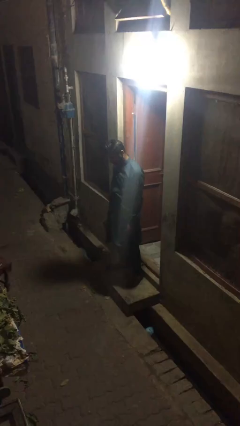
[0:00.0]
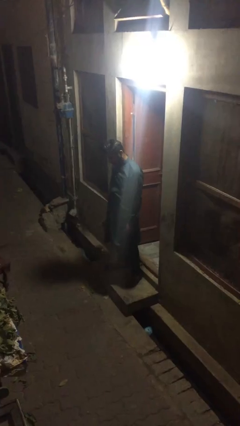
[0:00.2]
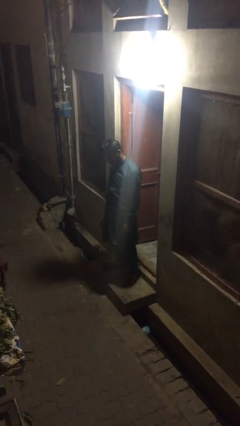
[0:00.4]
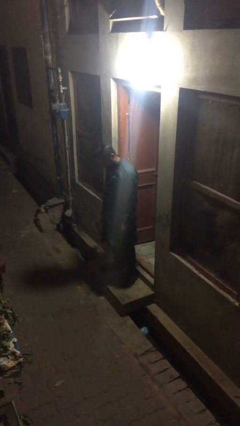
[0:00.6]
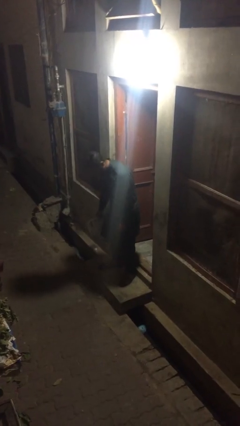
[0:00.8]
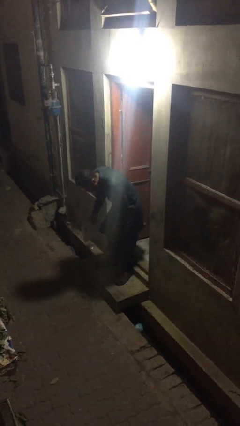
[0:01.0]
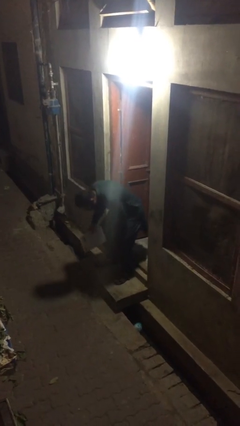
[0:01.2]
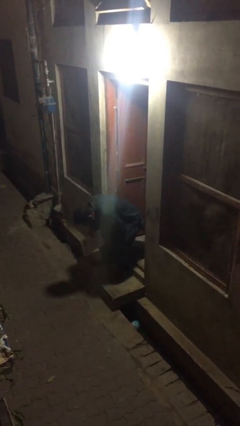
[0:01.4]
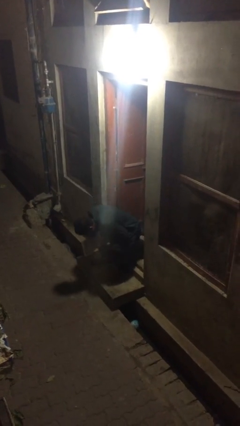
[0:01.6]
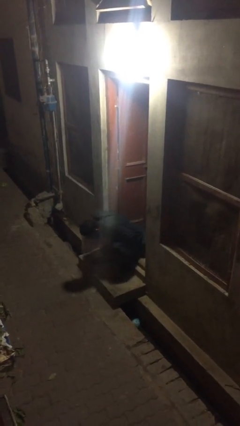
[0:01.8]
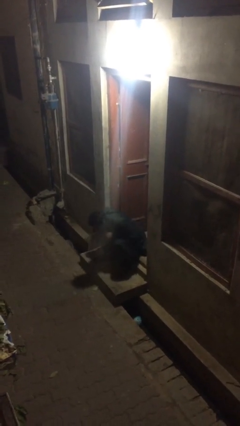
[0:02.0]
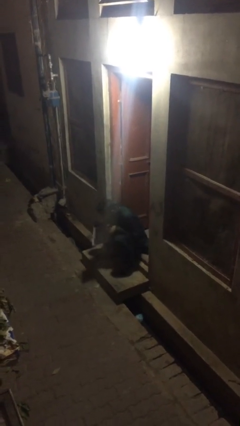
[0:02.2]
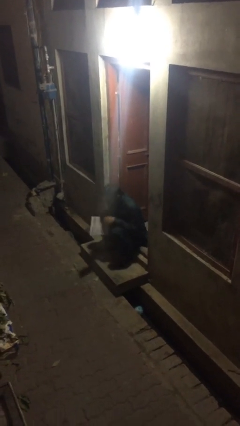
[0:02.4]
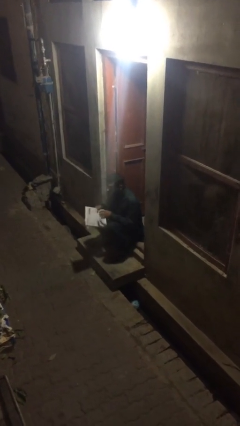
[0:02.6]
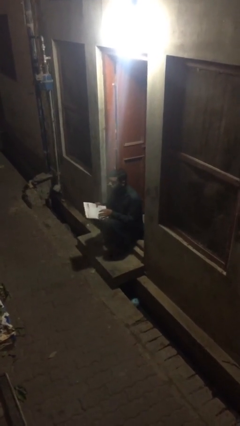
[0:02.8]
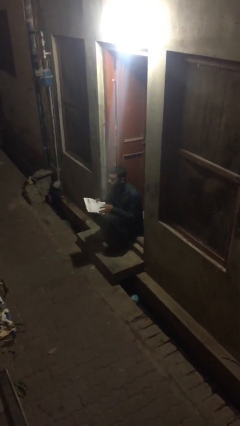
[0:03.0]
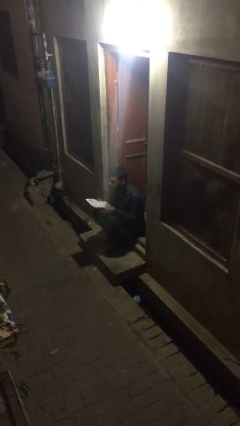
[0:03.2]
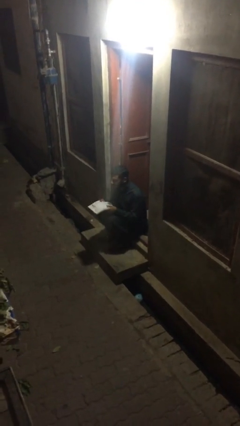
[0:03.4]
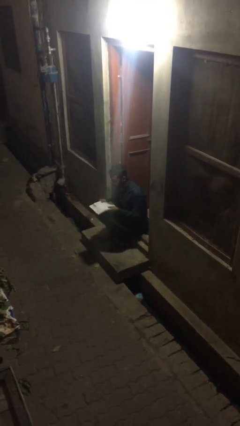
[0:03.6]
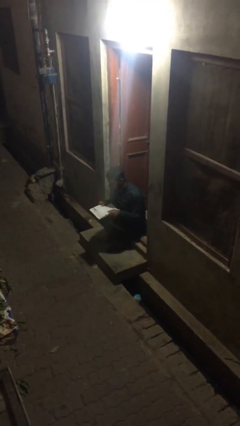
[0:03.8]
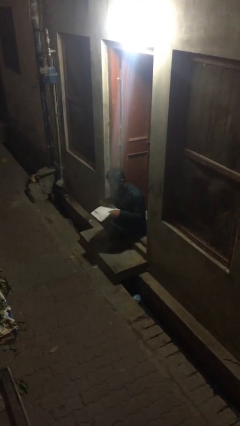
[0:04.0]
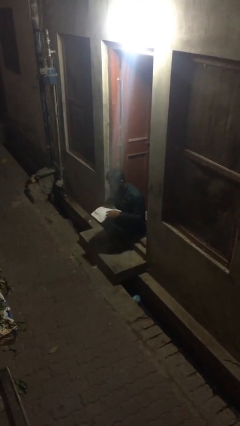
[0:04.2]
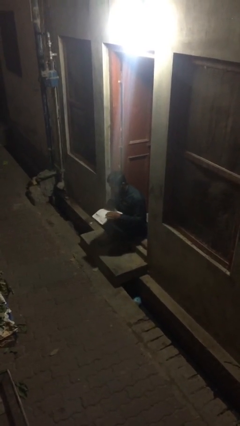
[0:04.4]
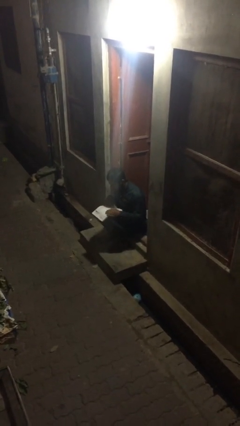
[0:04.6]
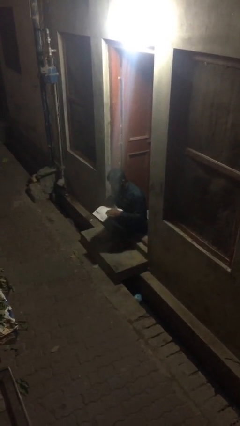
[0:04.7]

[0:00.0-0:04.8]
person sits down

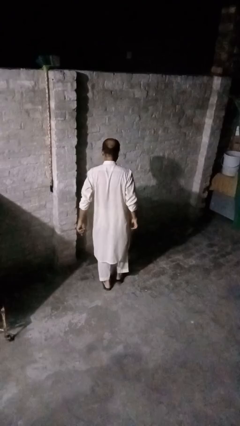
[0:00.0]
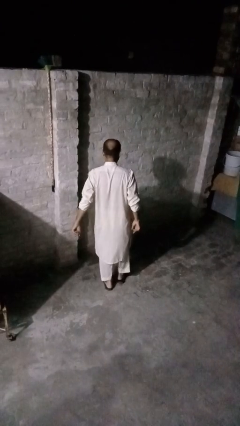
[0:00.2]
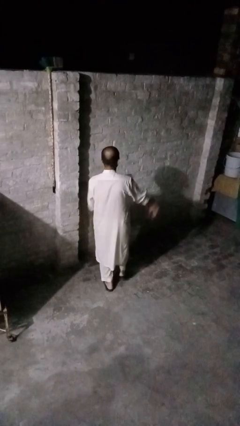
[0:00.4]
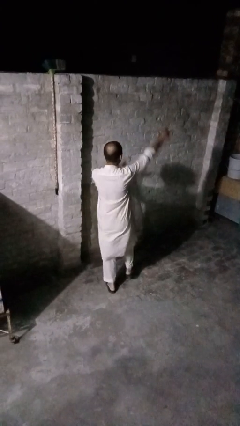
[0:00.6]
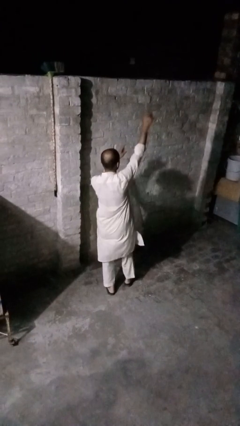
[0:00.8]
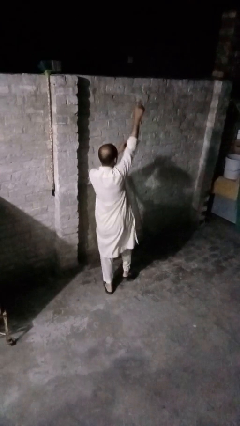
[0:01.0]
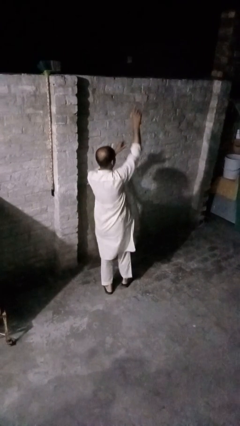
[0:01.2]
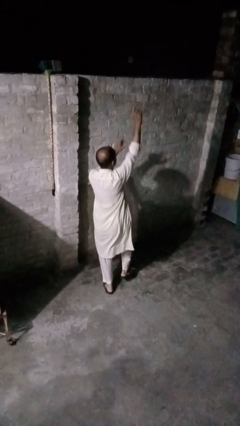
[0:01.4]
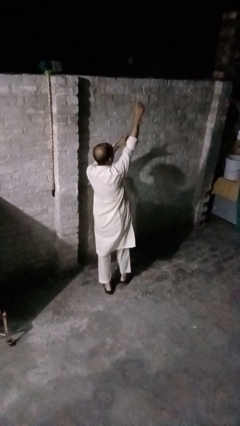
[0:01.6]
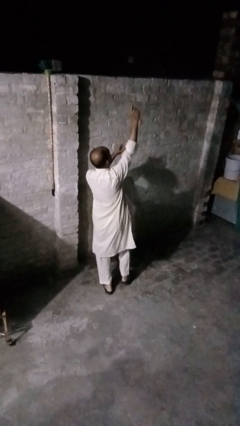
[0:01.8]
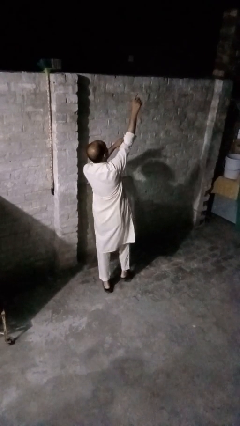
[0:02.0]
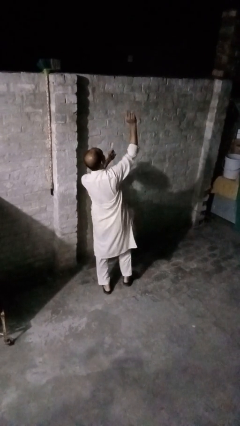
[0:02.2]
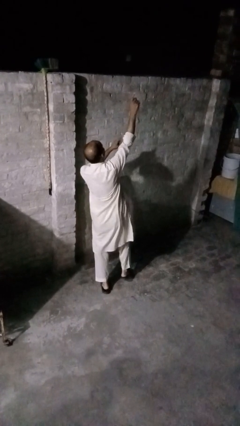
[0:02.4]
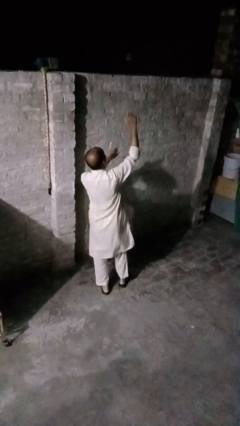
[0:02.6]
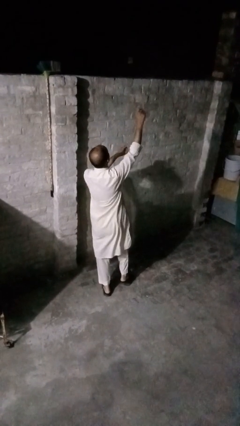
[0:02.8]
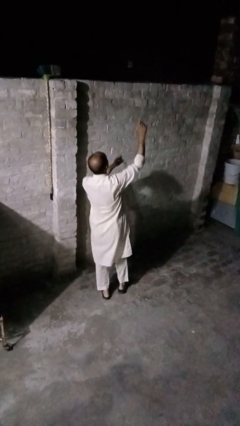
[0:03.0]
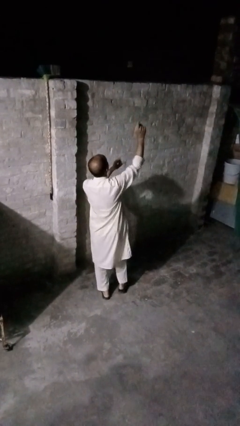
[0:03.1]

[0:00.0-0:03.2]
person dances in place

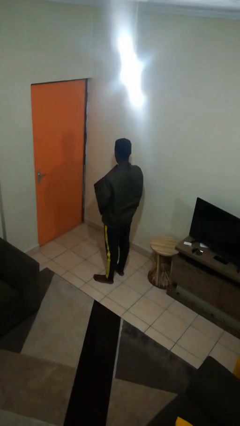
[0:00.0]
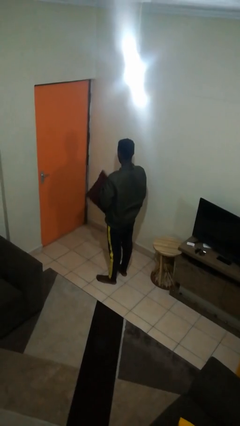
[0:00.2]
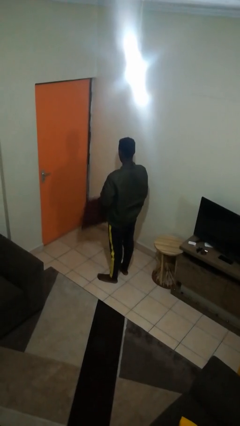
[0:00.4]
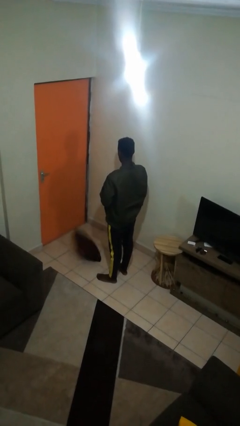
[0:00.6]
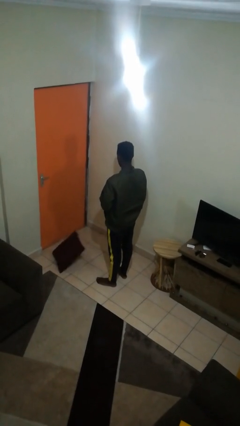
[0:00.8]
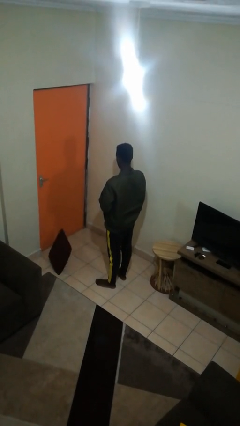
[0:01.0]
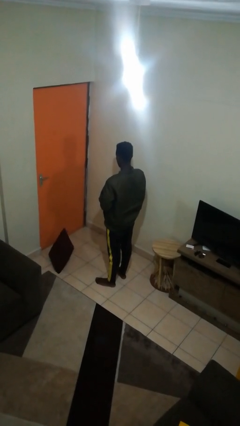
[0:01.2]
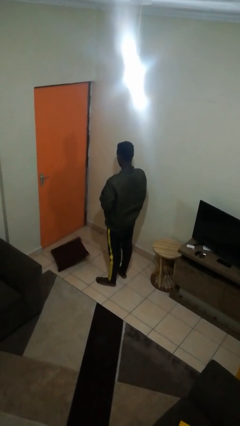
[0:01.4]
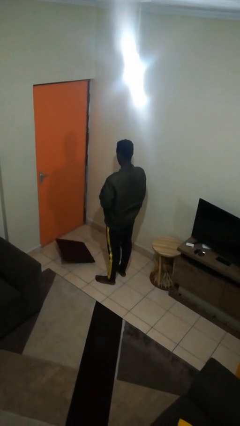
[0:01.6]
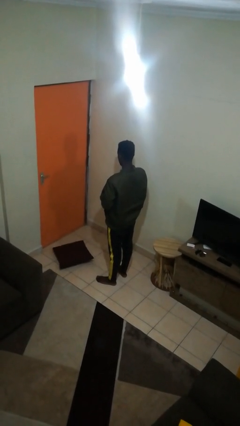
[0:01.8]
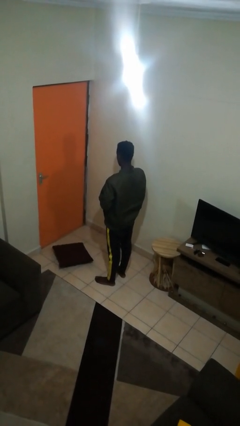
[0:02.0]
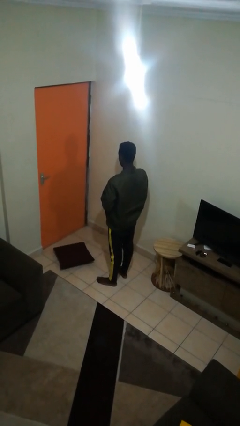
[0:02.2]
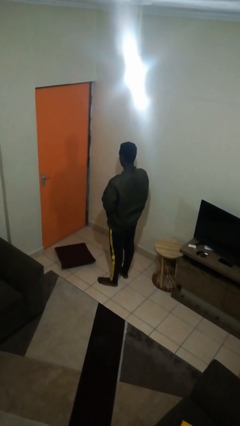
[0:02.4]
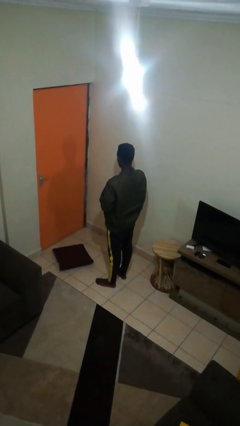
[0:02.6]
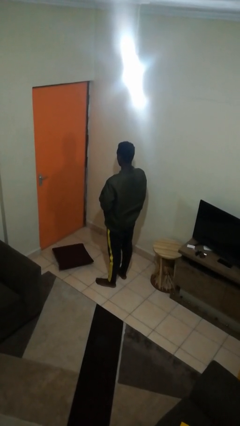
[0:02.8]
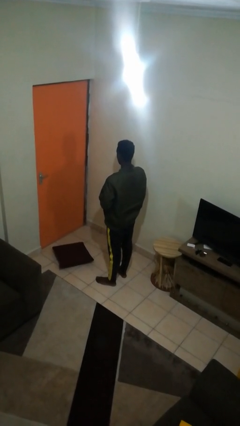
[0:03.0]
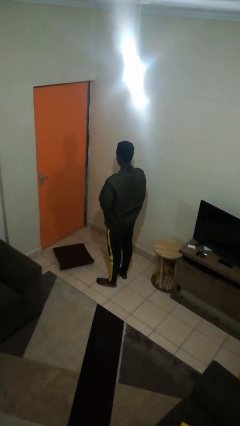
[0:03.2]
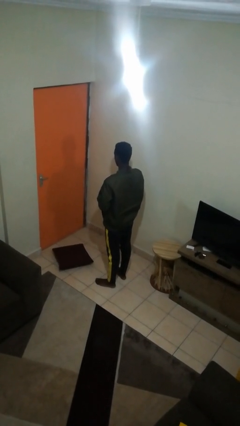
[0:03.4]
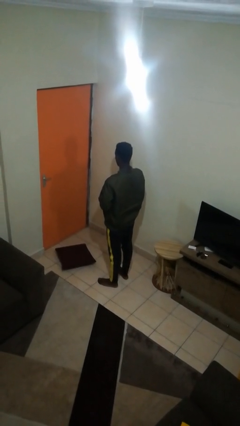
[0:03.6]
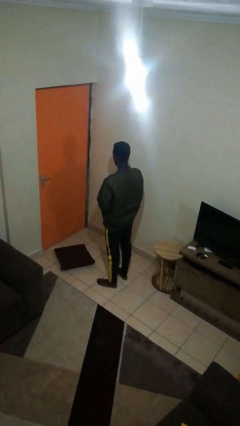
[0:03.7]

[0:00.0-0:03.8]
person drops object

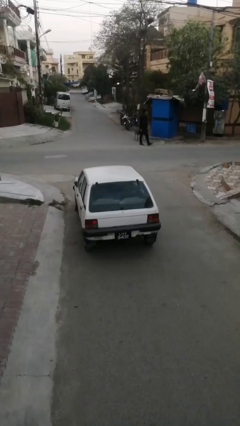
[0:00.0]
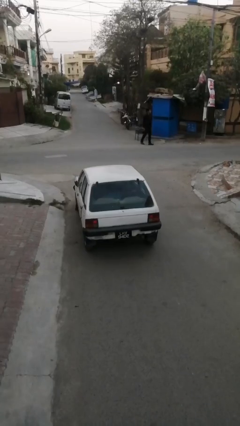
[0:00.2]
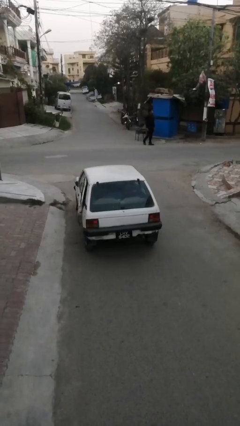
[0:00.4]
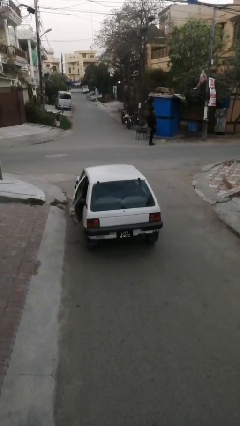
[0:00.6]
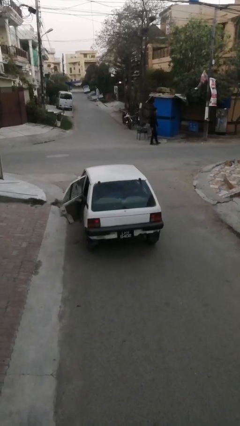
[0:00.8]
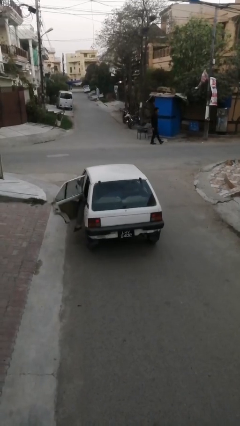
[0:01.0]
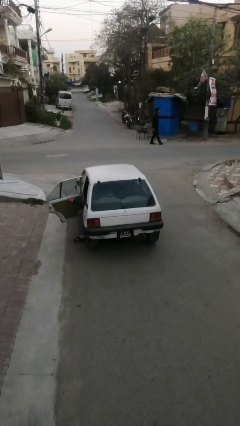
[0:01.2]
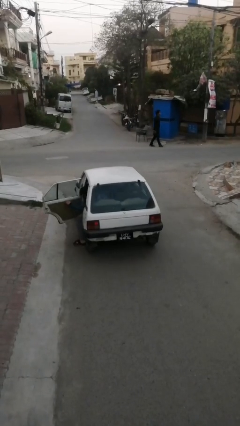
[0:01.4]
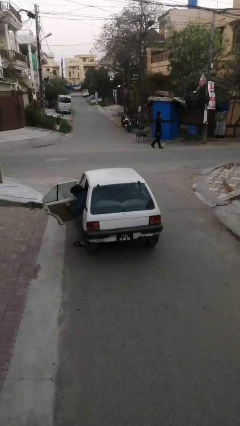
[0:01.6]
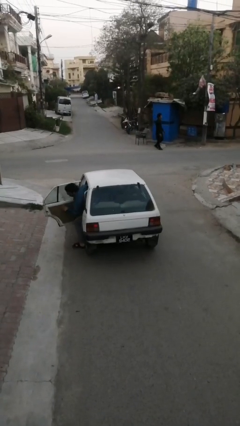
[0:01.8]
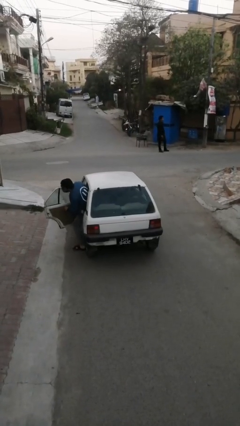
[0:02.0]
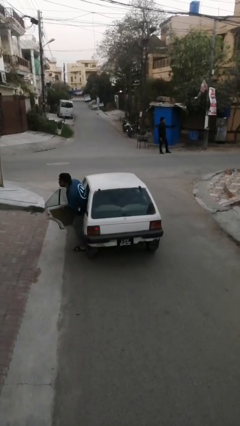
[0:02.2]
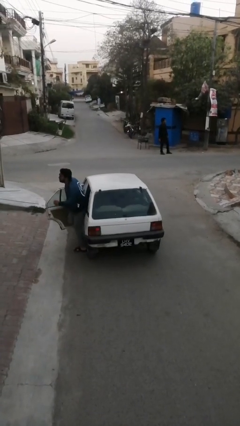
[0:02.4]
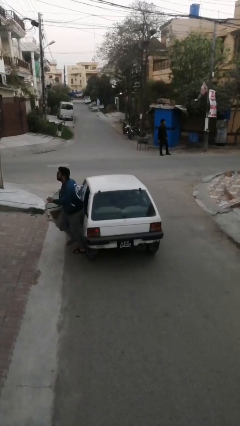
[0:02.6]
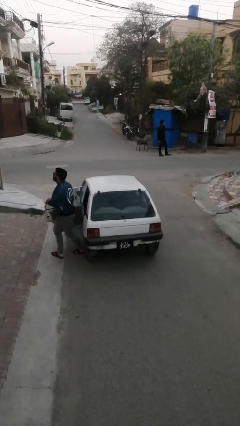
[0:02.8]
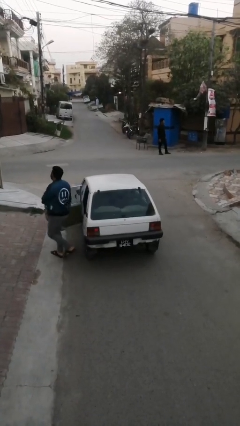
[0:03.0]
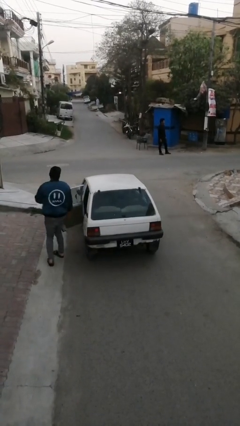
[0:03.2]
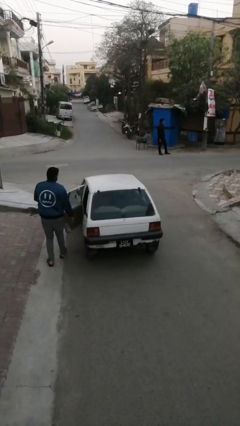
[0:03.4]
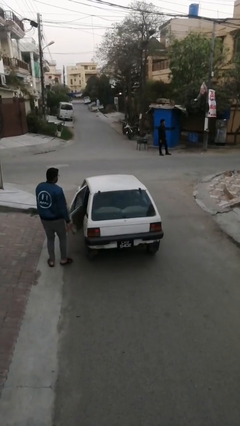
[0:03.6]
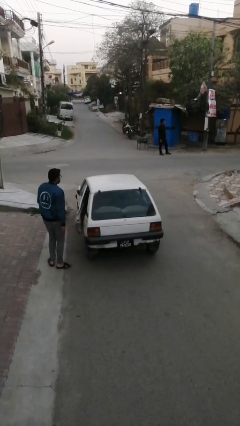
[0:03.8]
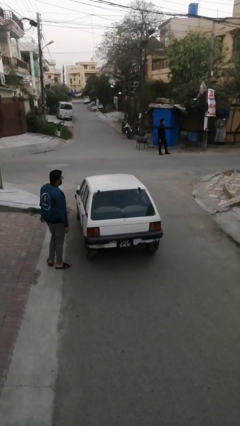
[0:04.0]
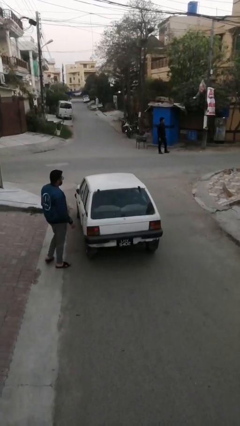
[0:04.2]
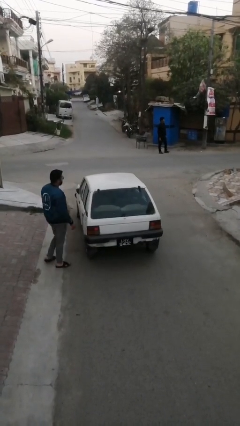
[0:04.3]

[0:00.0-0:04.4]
car drops off person

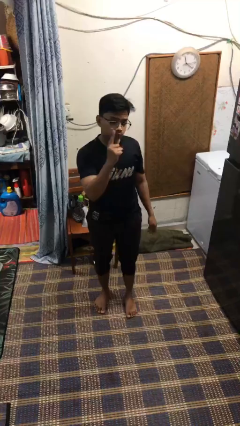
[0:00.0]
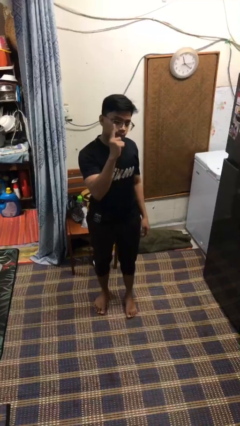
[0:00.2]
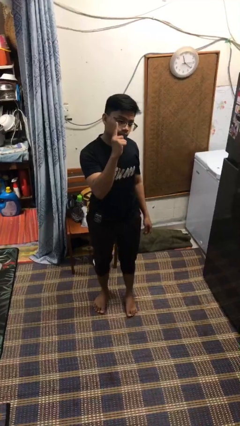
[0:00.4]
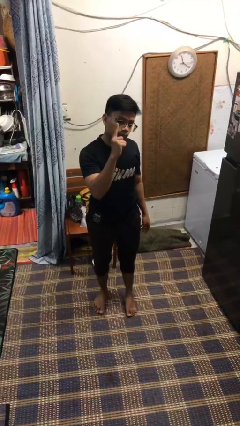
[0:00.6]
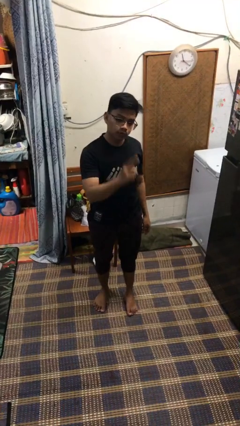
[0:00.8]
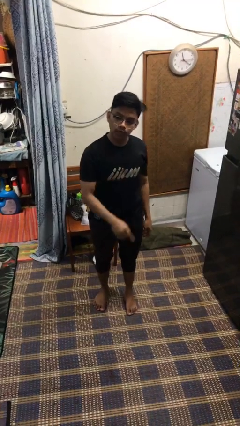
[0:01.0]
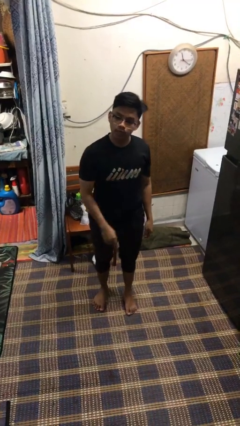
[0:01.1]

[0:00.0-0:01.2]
person gestures number one
